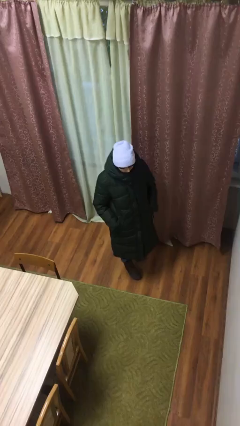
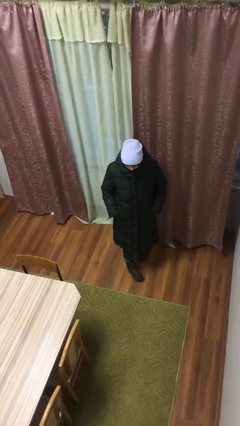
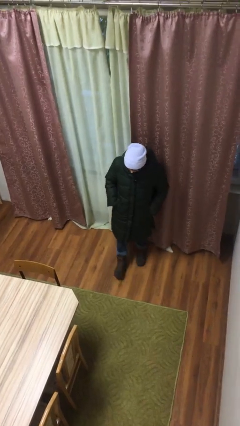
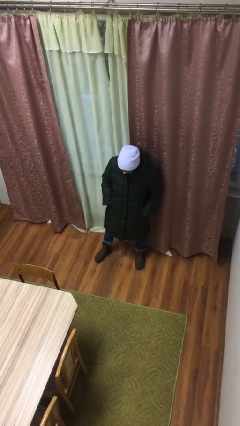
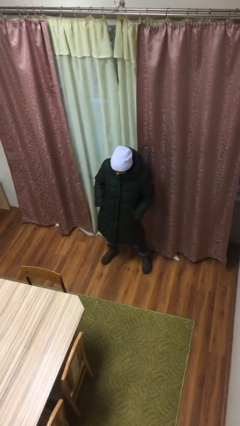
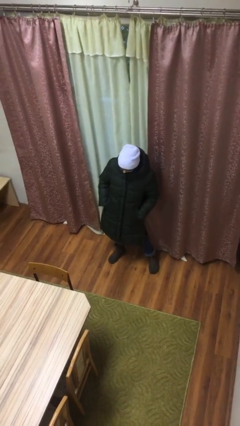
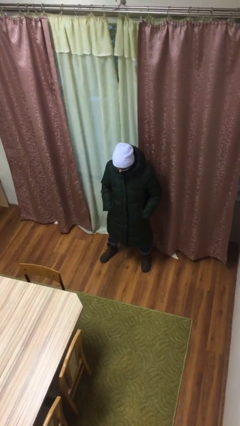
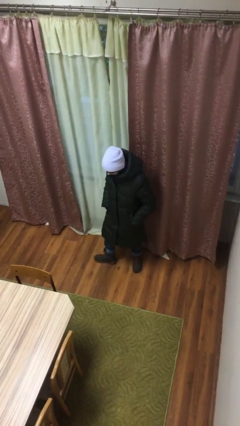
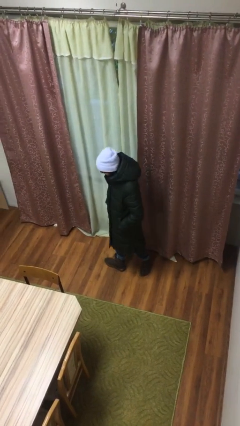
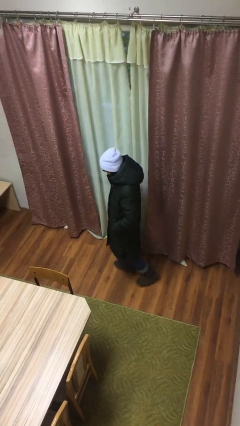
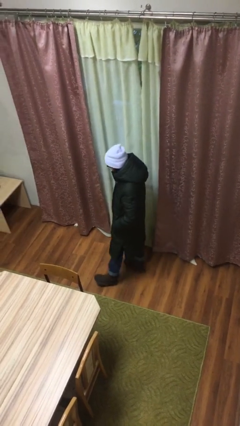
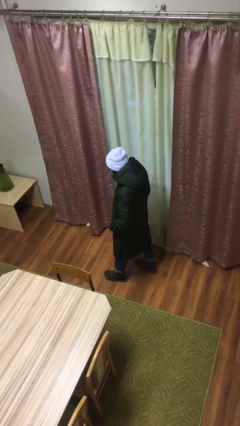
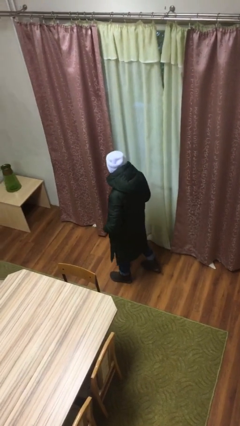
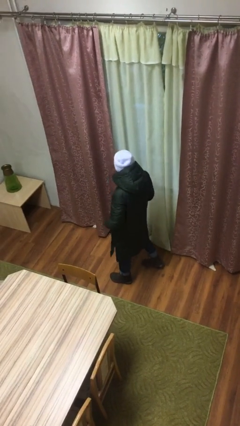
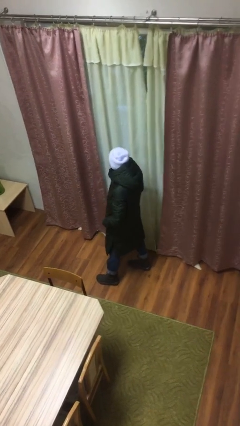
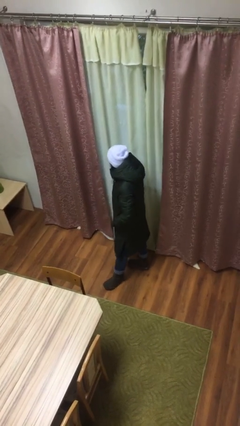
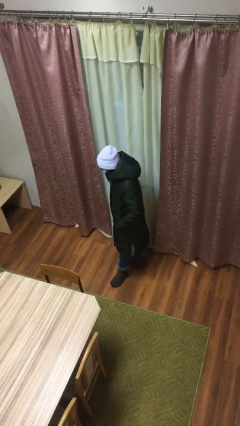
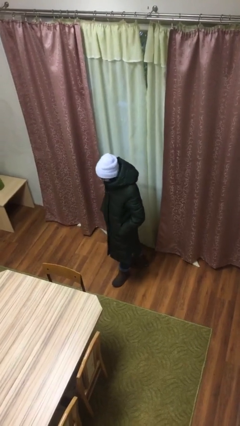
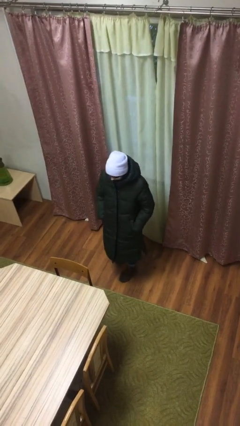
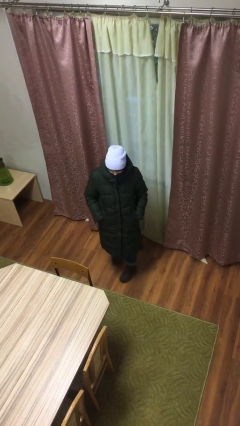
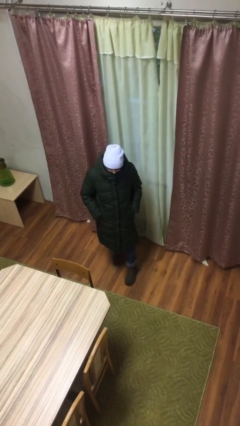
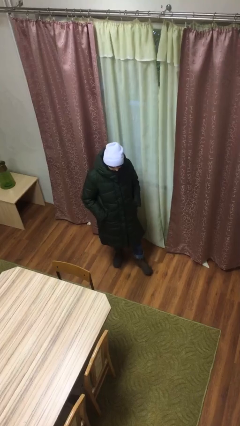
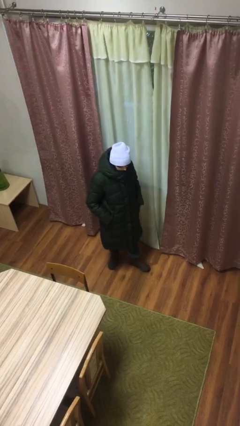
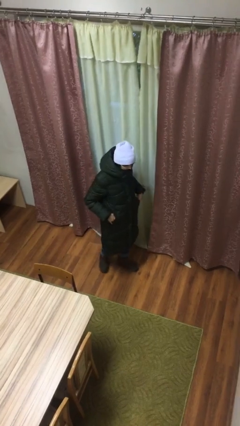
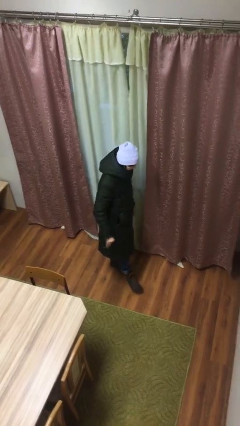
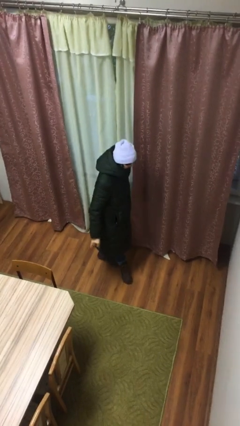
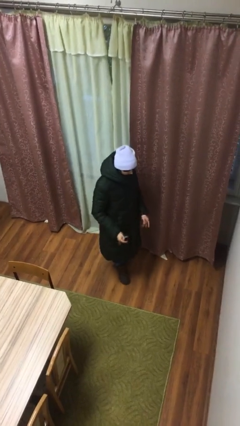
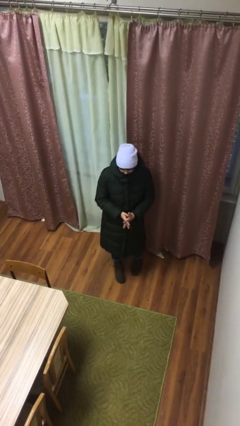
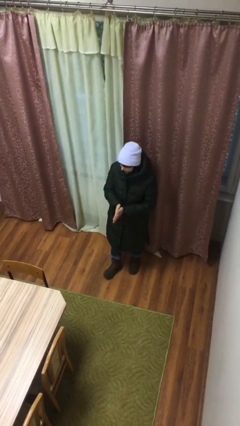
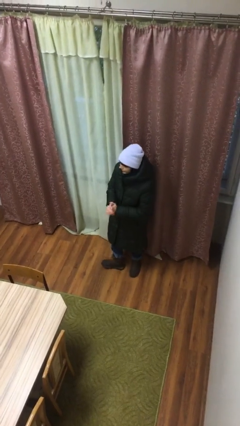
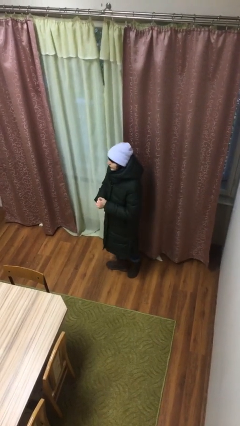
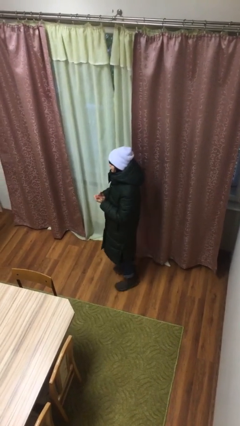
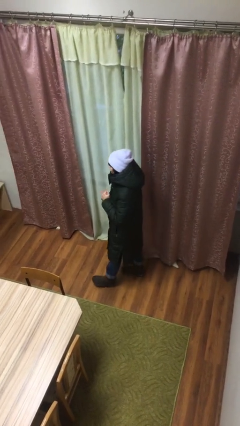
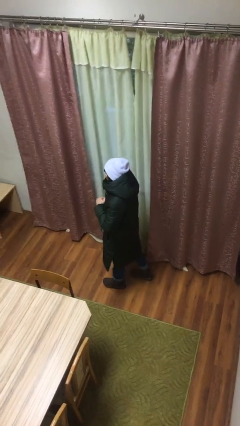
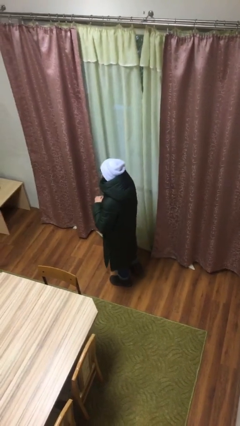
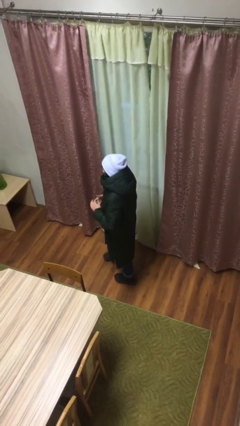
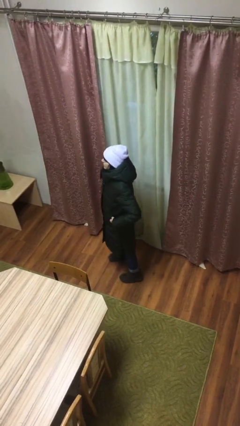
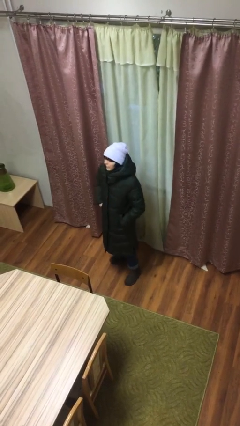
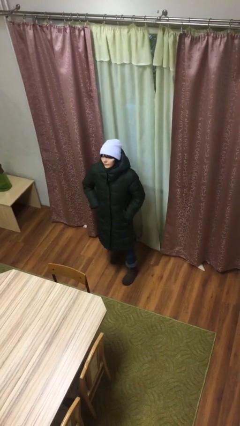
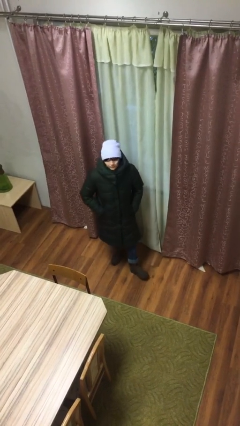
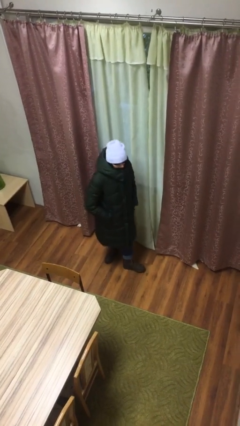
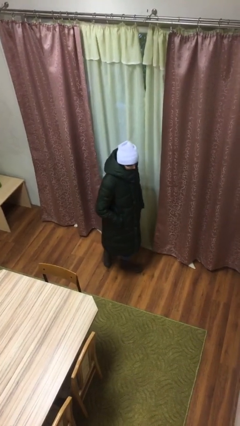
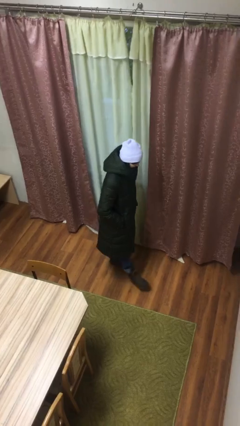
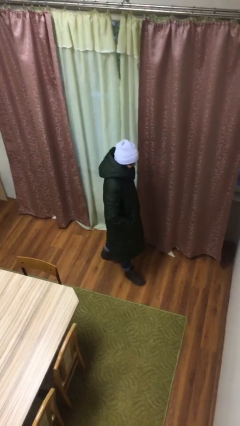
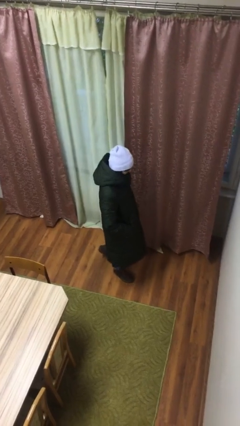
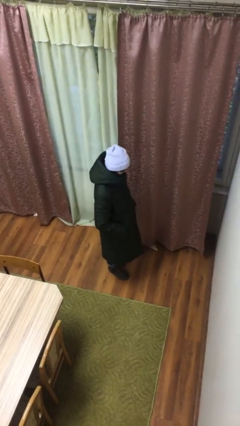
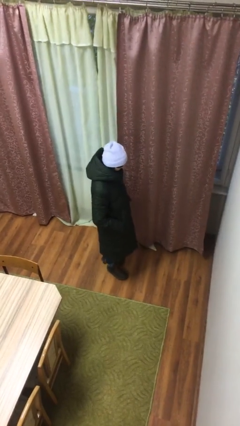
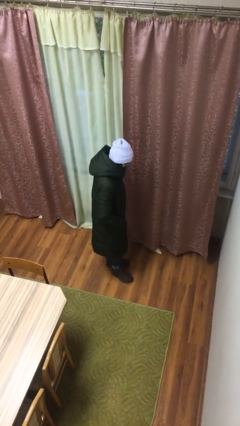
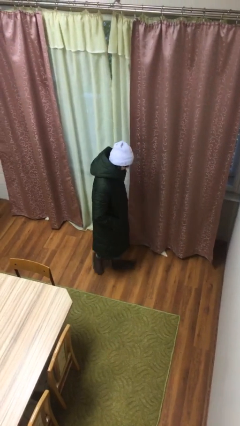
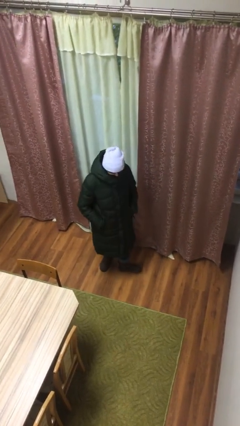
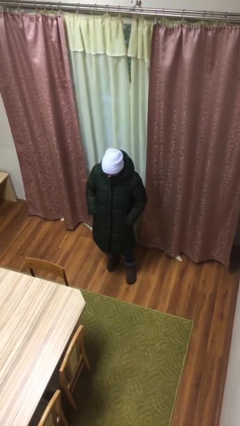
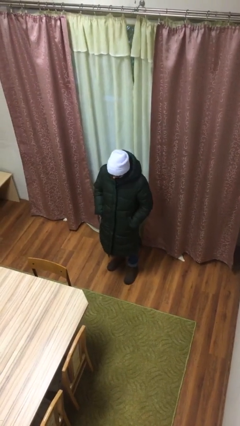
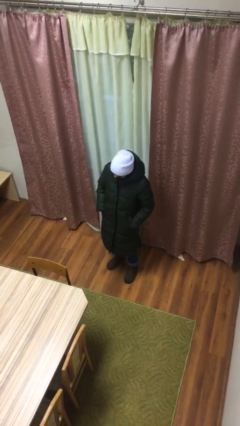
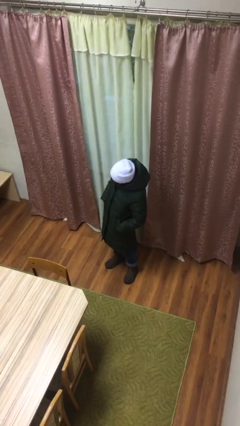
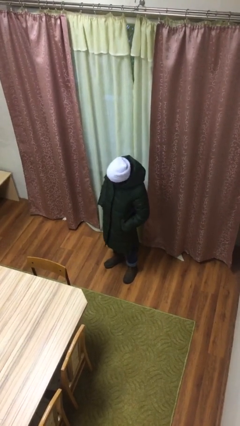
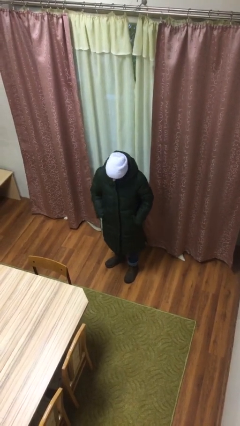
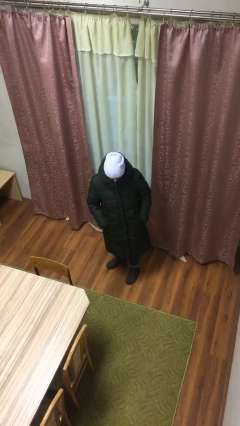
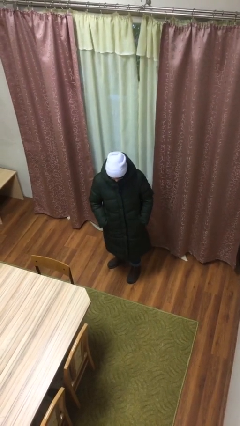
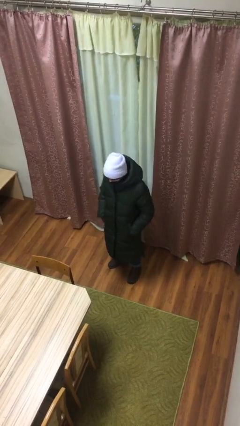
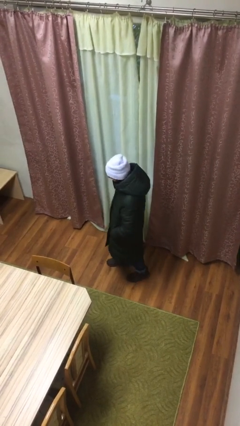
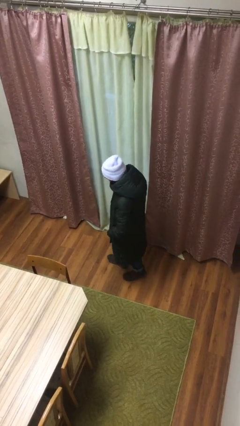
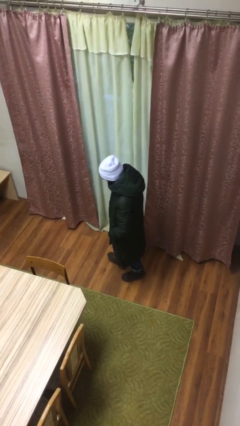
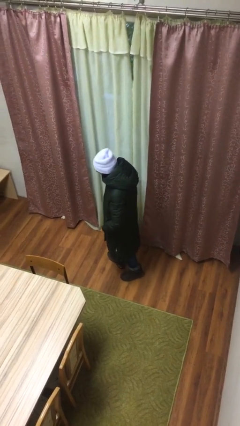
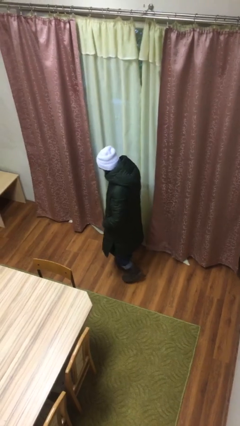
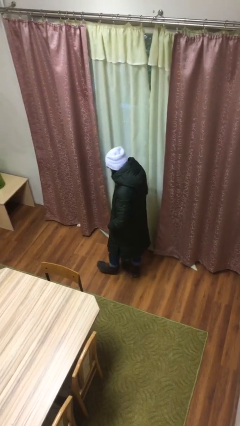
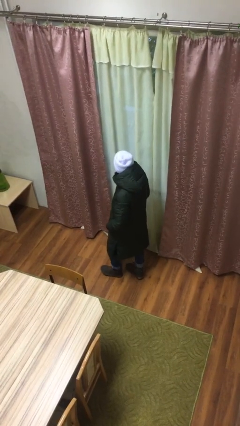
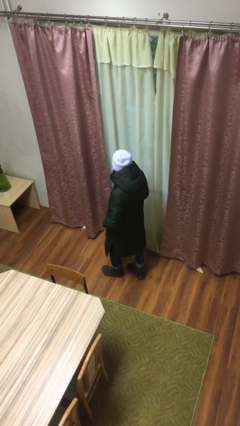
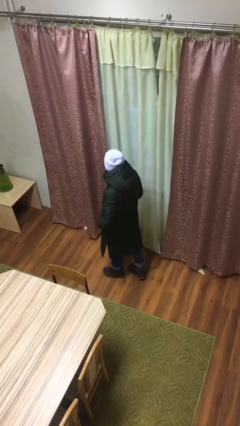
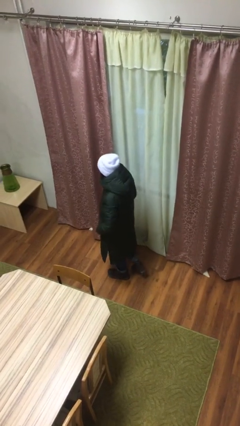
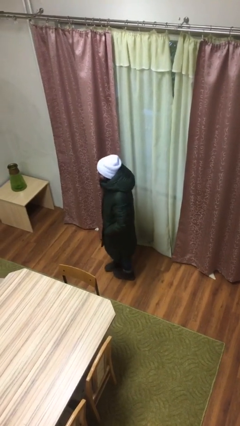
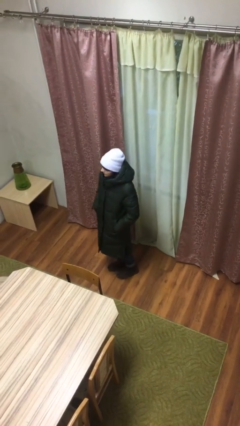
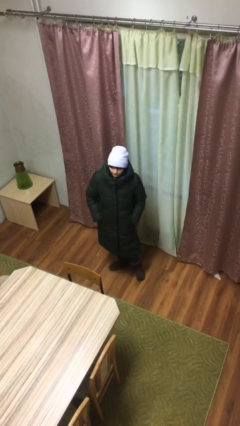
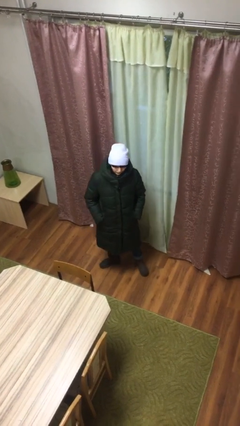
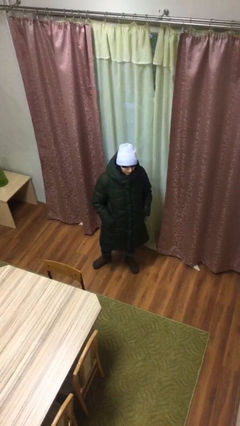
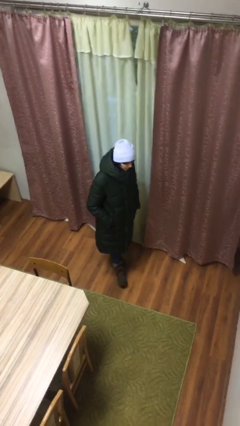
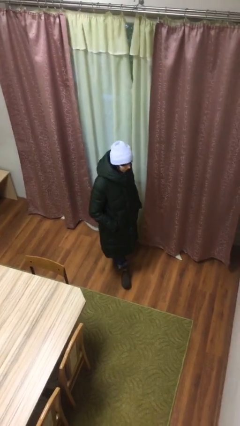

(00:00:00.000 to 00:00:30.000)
person walks

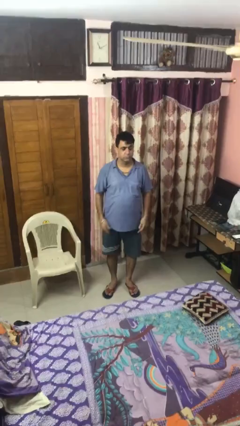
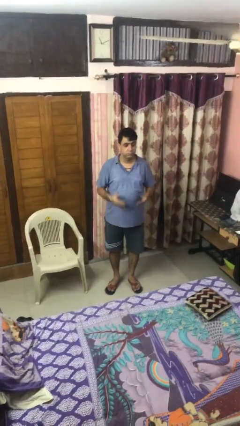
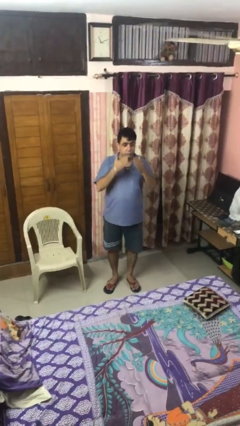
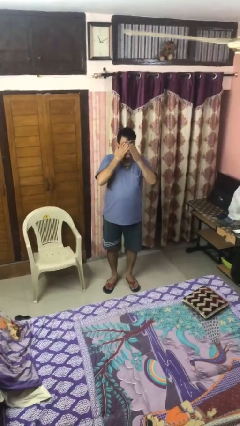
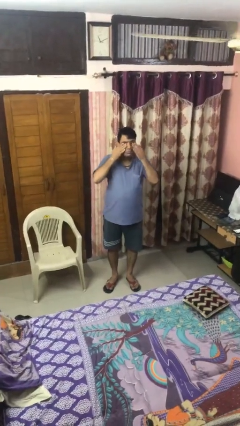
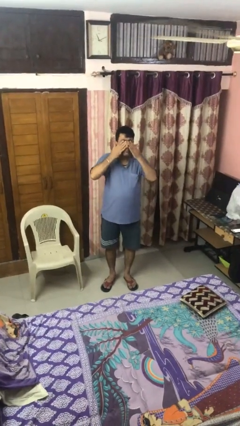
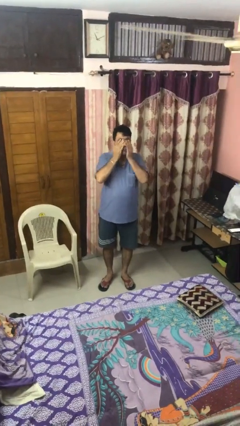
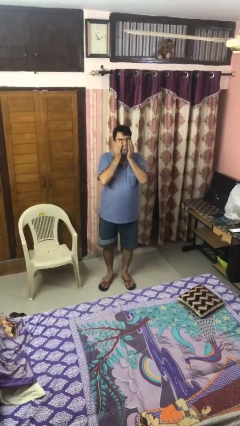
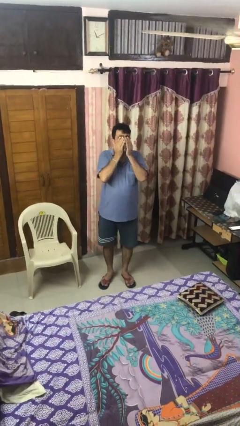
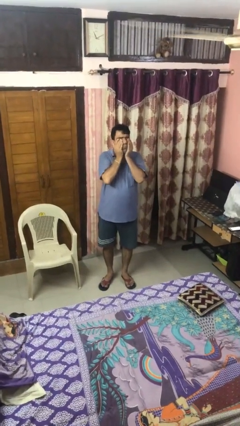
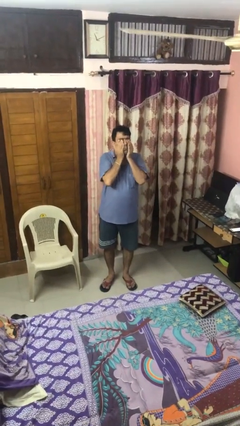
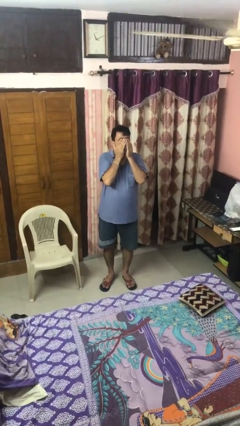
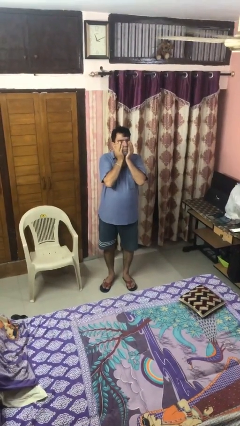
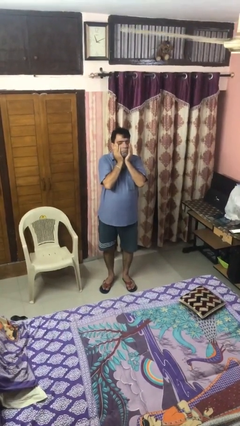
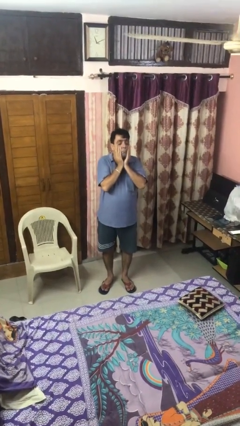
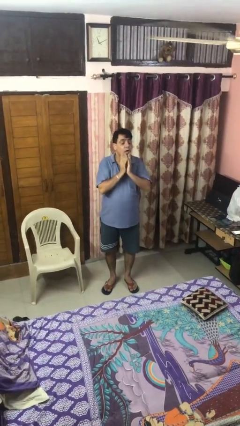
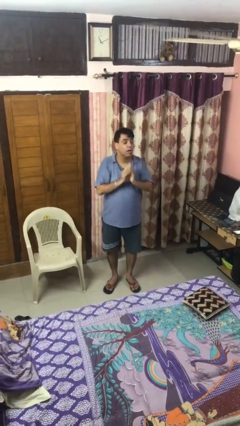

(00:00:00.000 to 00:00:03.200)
person rubs eyes
